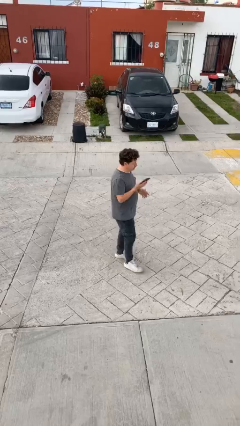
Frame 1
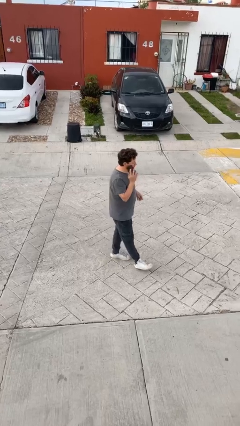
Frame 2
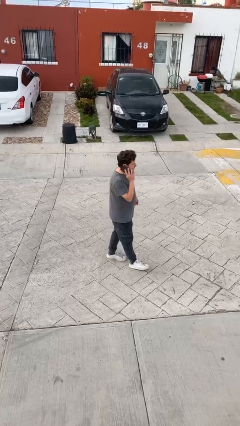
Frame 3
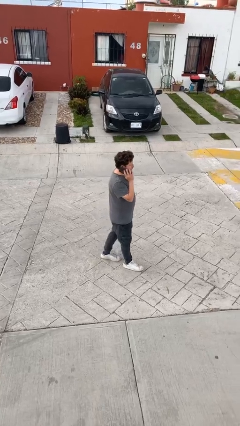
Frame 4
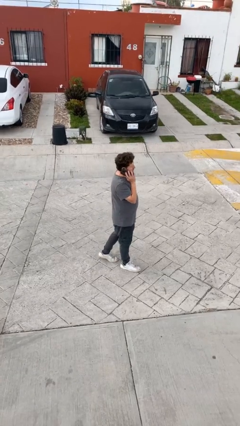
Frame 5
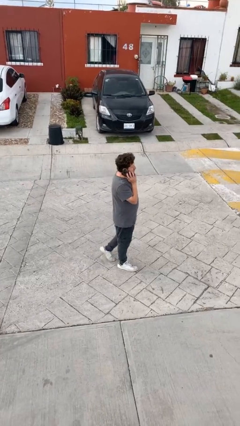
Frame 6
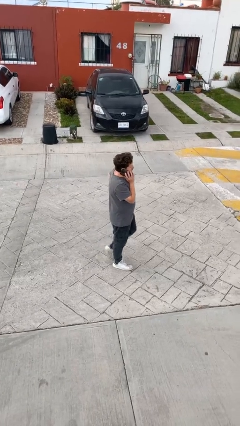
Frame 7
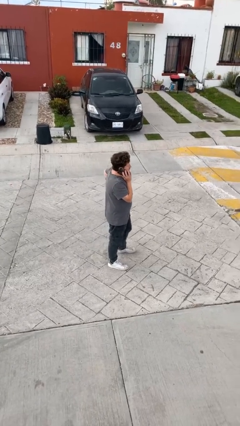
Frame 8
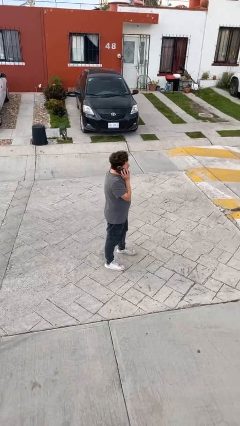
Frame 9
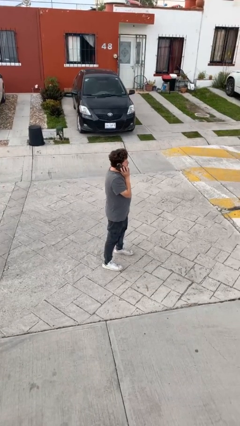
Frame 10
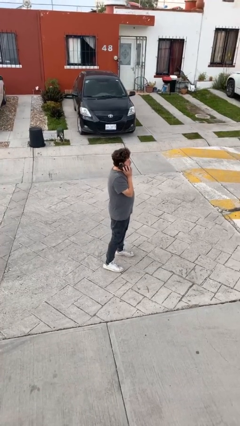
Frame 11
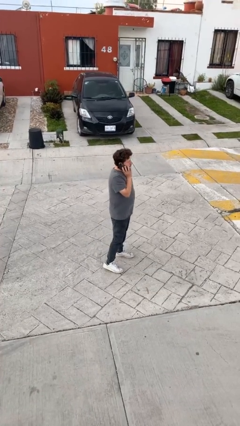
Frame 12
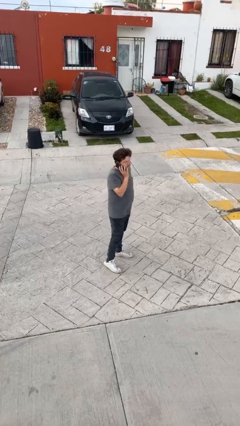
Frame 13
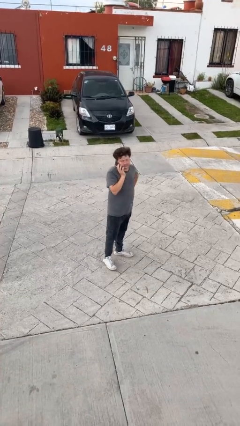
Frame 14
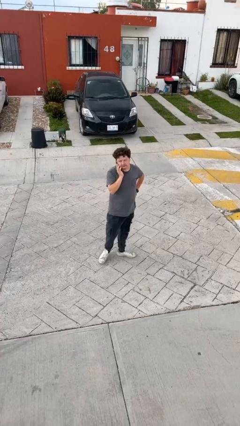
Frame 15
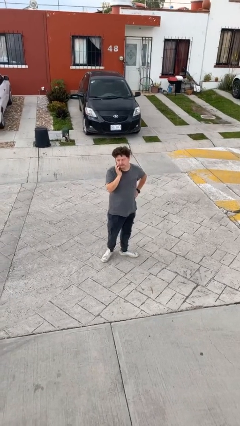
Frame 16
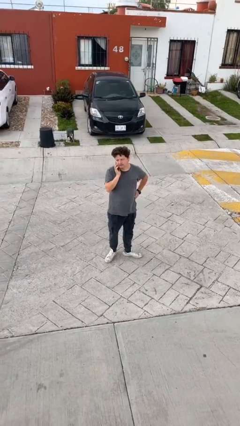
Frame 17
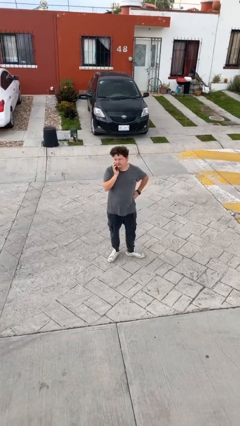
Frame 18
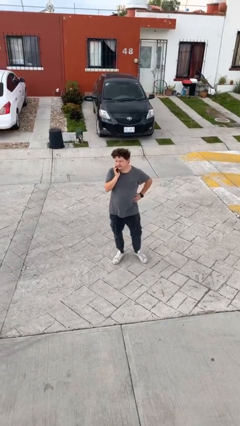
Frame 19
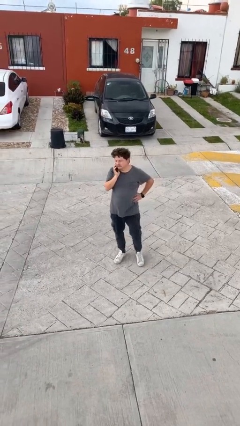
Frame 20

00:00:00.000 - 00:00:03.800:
person talks on phone

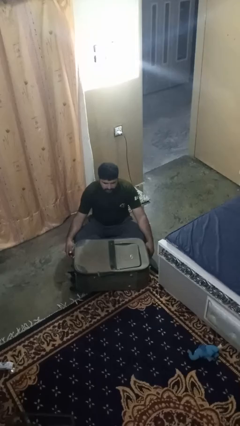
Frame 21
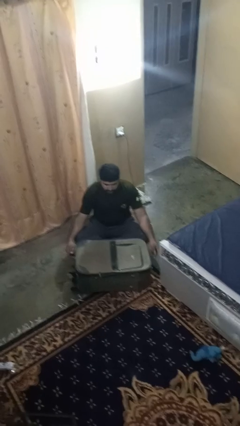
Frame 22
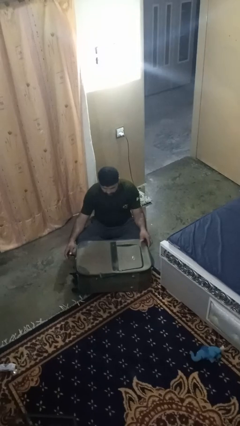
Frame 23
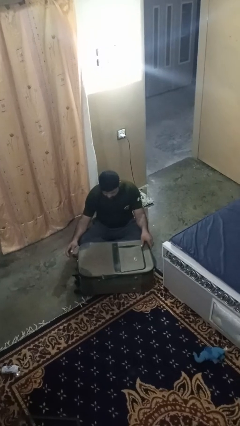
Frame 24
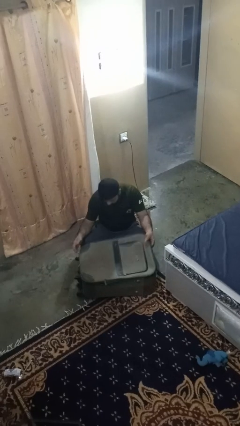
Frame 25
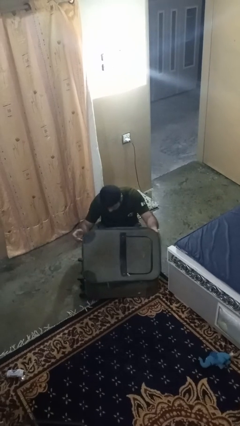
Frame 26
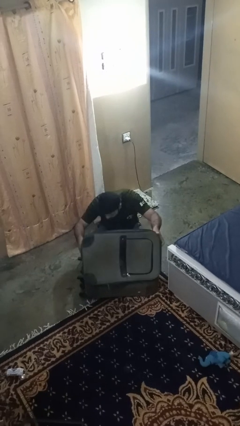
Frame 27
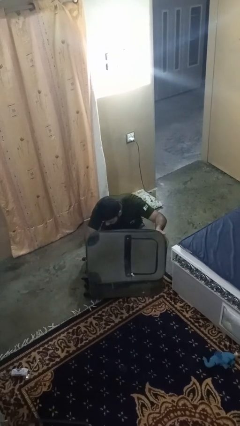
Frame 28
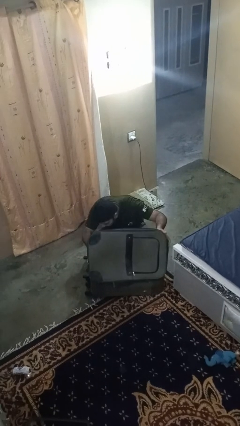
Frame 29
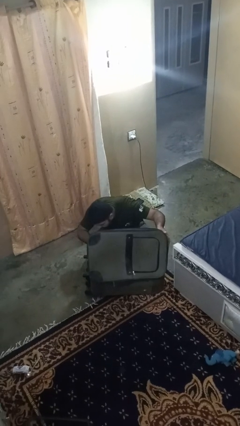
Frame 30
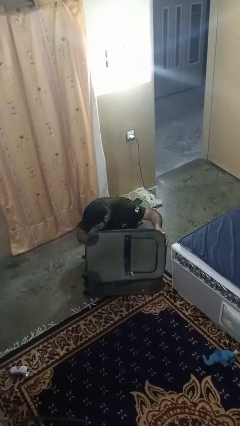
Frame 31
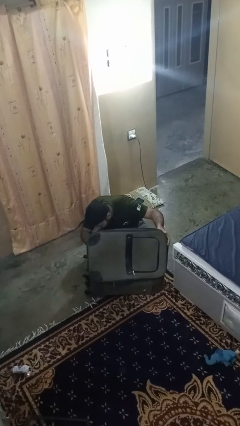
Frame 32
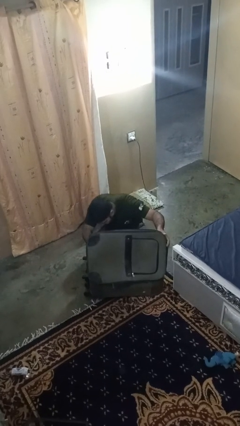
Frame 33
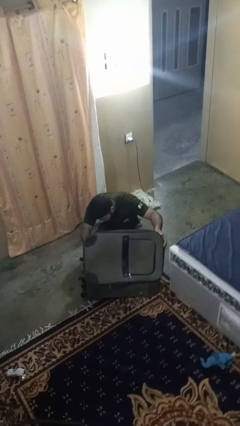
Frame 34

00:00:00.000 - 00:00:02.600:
person searches in bag

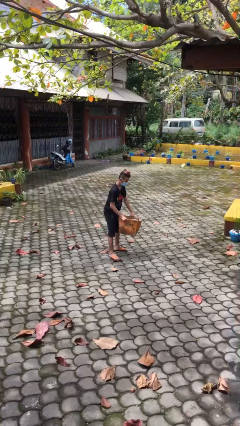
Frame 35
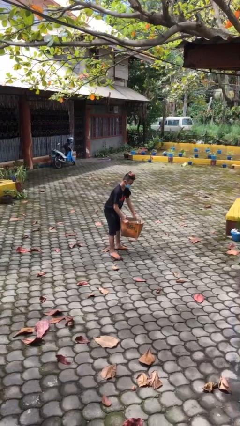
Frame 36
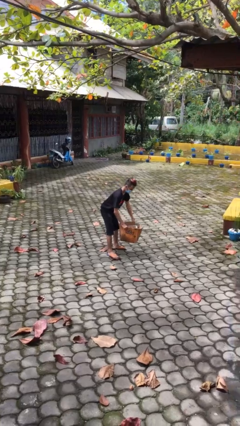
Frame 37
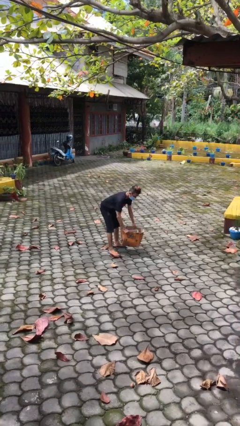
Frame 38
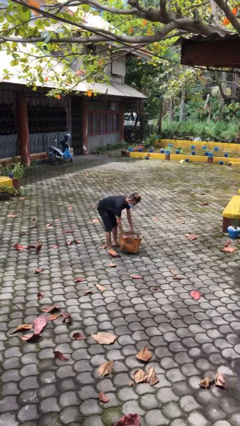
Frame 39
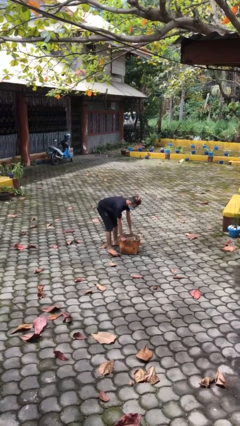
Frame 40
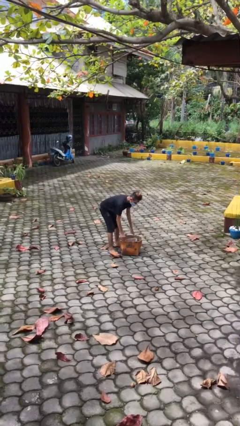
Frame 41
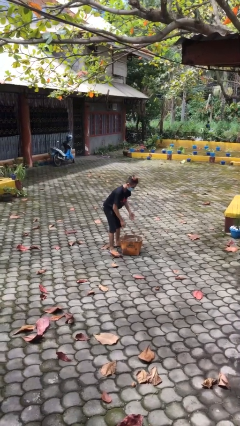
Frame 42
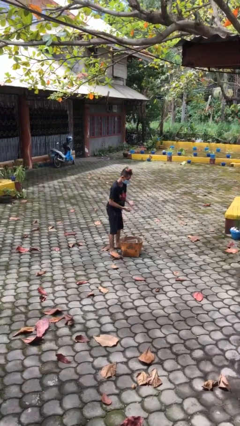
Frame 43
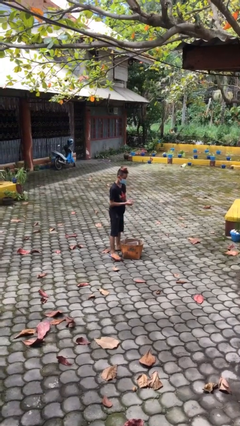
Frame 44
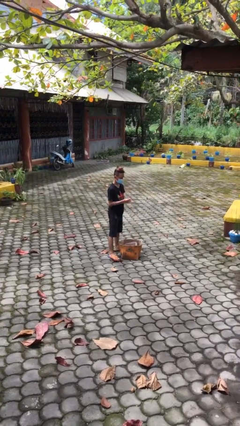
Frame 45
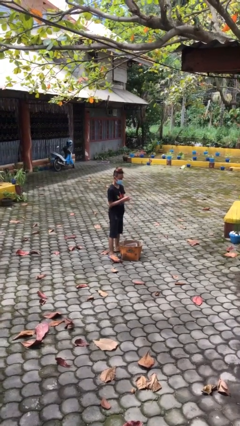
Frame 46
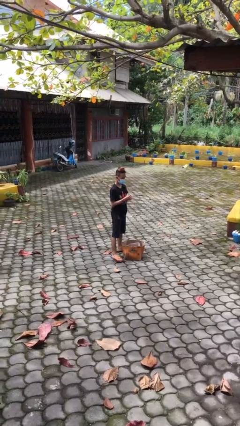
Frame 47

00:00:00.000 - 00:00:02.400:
person puts down object on floor

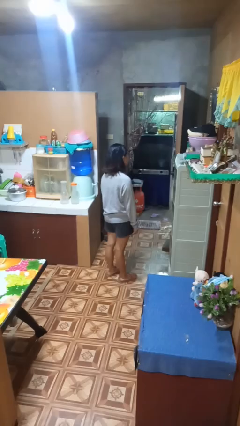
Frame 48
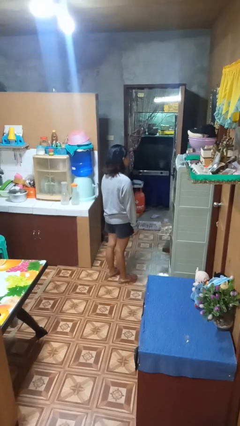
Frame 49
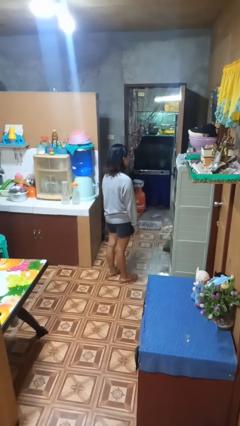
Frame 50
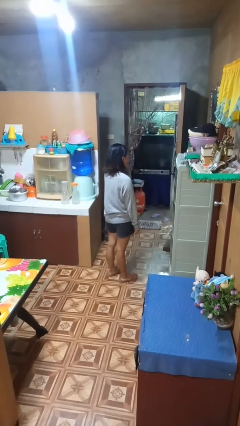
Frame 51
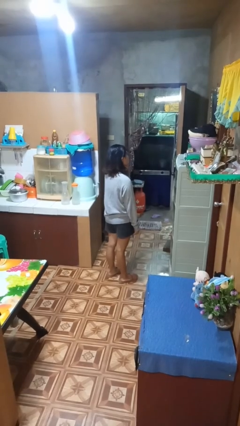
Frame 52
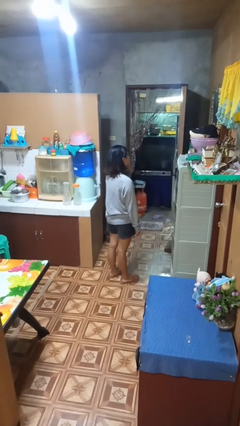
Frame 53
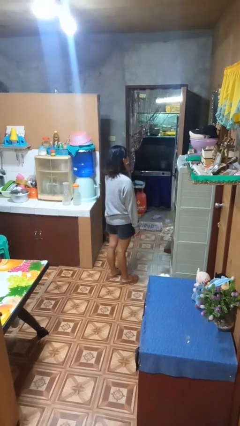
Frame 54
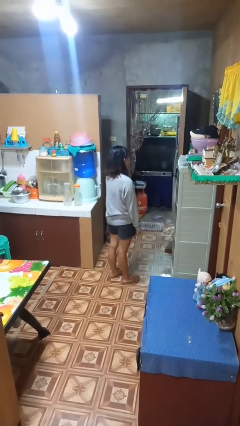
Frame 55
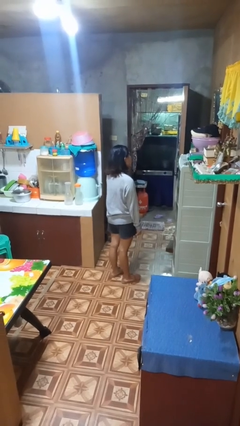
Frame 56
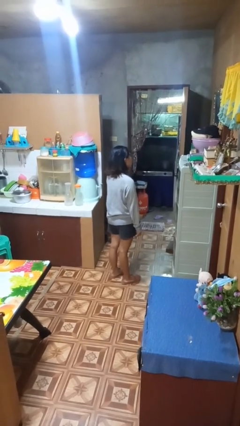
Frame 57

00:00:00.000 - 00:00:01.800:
person strokes chin

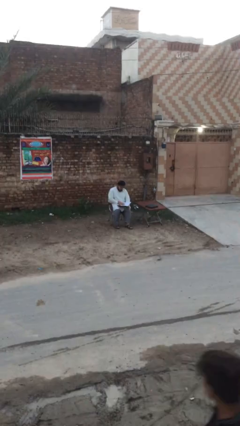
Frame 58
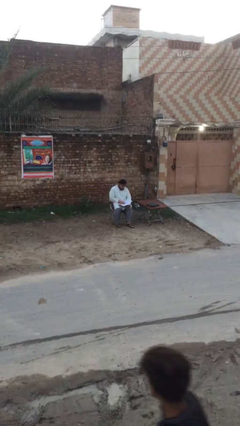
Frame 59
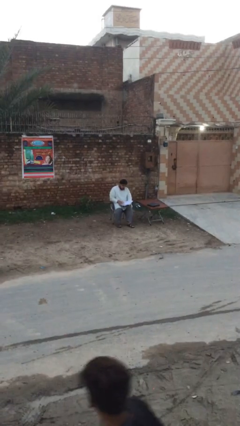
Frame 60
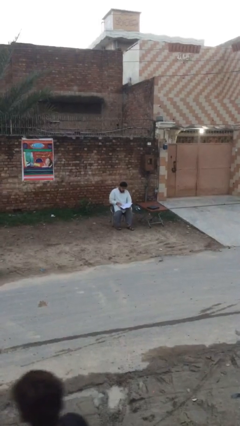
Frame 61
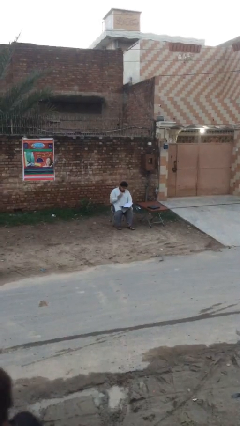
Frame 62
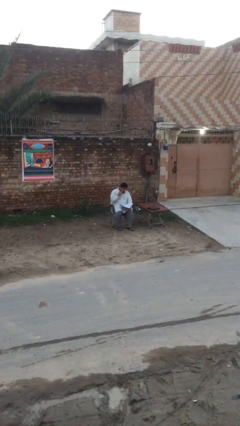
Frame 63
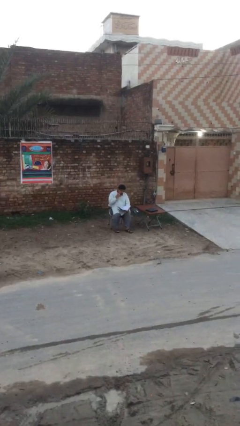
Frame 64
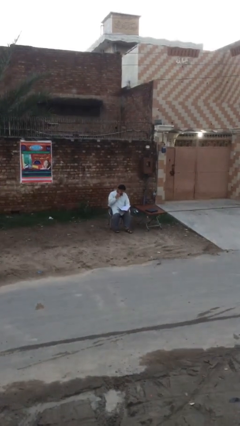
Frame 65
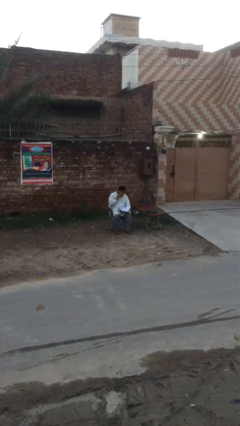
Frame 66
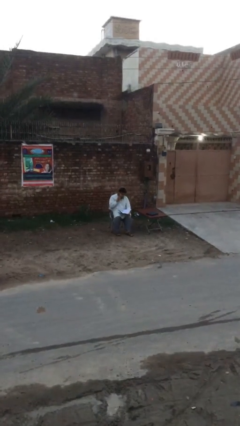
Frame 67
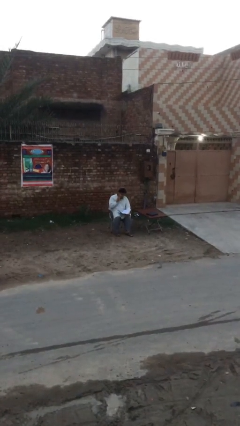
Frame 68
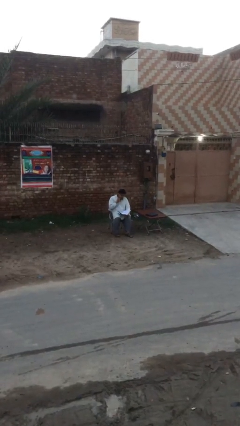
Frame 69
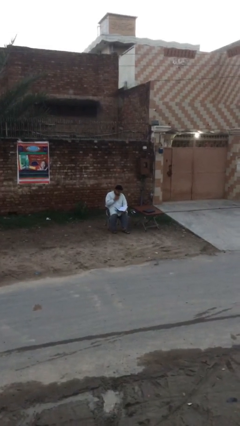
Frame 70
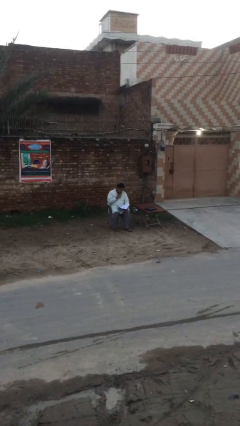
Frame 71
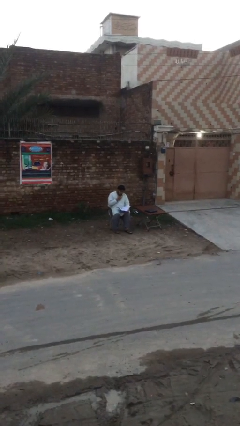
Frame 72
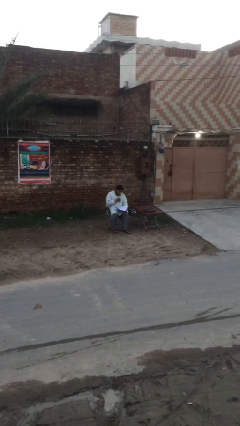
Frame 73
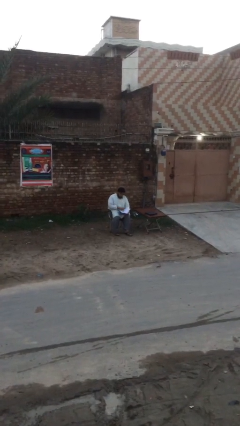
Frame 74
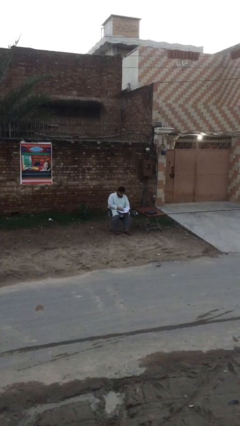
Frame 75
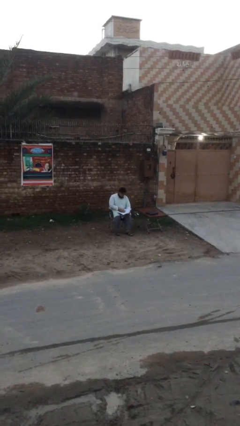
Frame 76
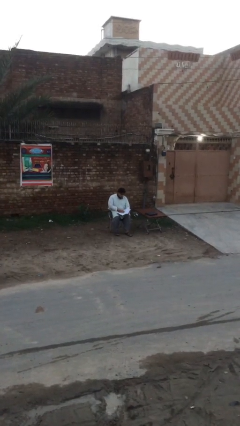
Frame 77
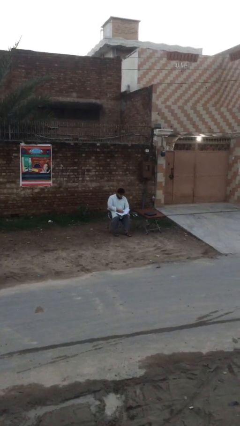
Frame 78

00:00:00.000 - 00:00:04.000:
person reads document

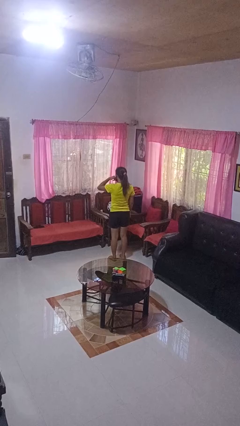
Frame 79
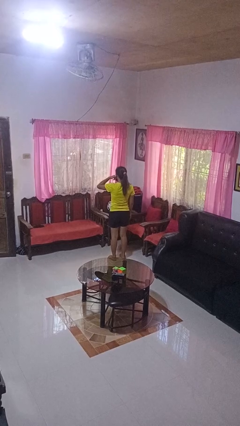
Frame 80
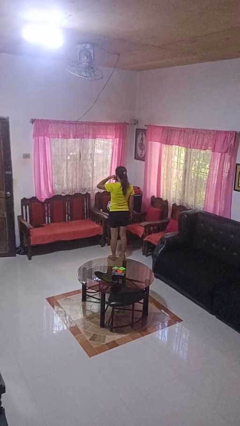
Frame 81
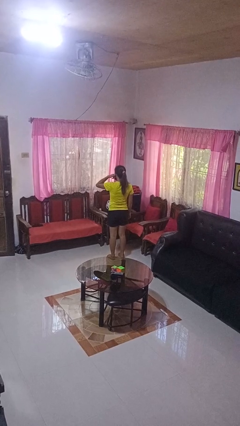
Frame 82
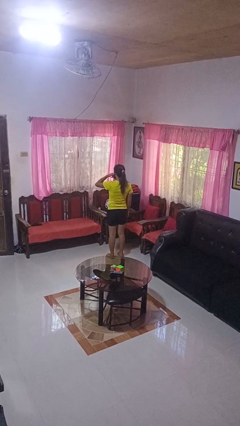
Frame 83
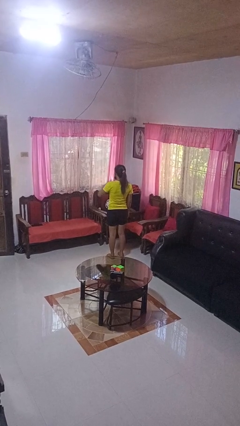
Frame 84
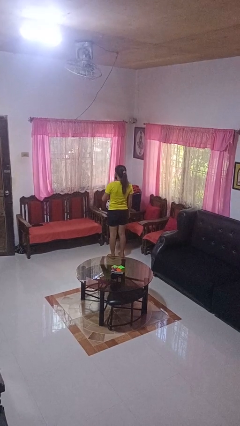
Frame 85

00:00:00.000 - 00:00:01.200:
person gestures call me

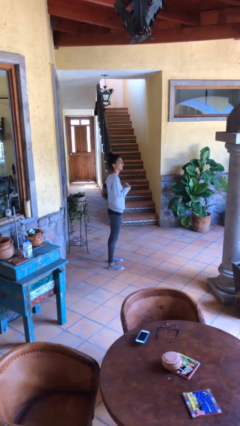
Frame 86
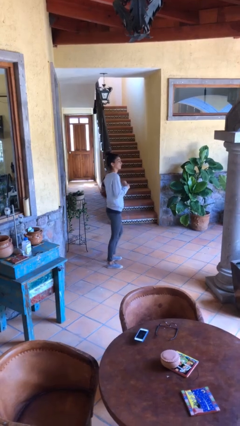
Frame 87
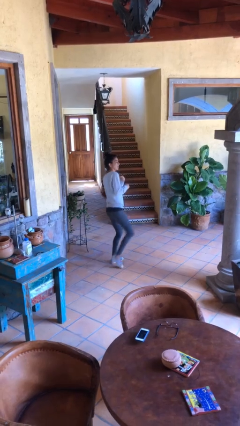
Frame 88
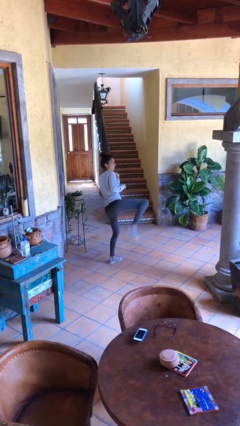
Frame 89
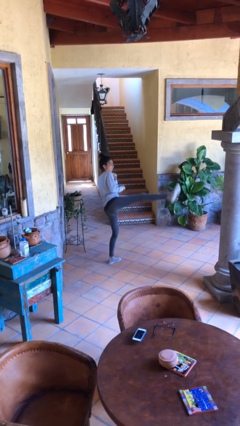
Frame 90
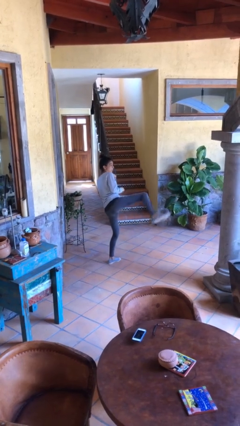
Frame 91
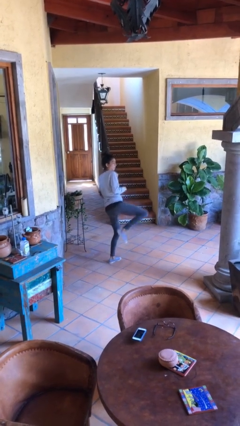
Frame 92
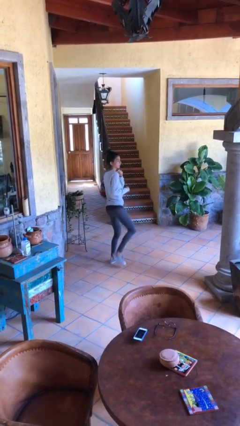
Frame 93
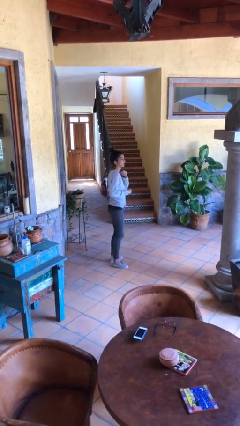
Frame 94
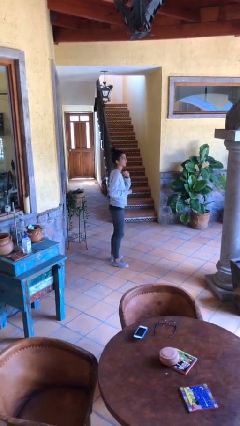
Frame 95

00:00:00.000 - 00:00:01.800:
person karate kicks
